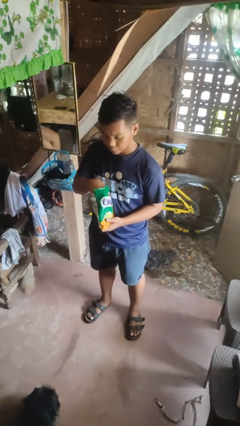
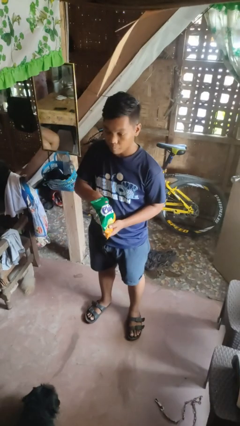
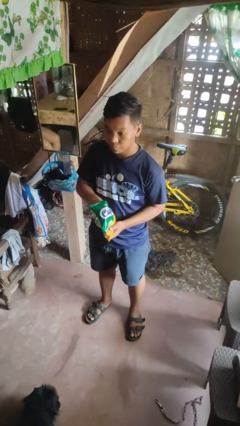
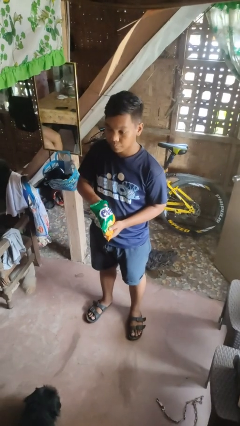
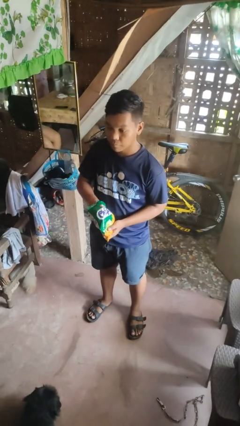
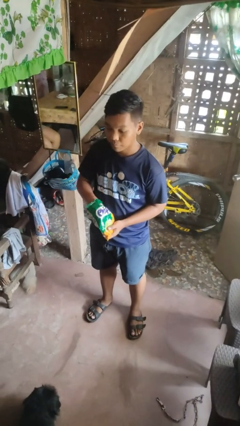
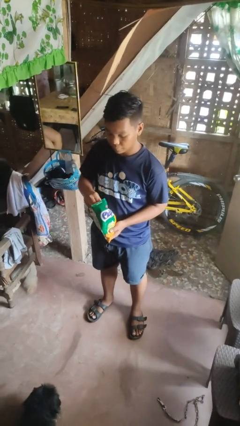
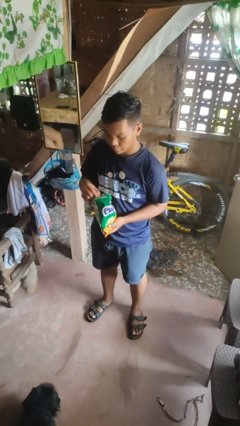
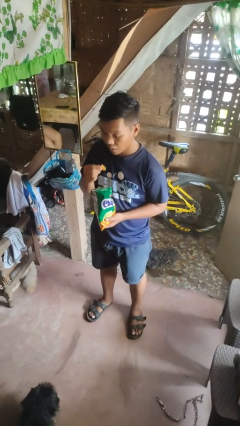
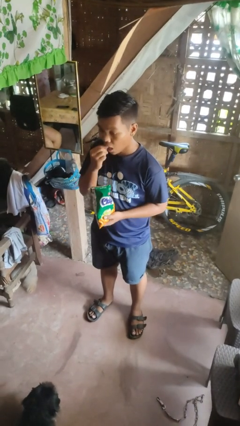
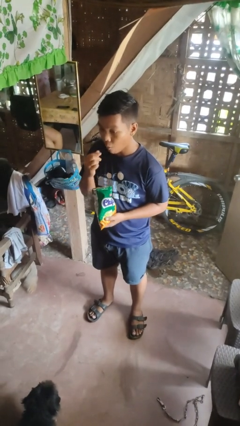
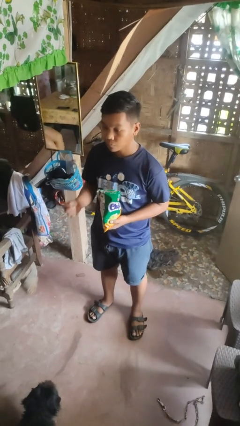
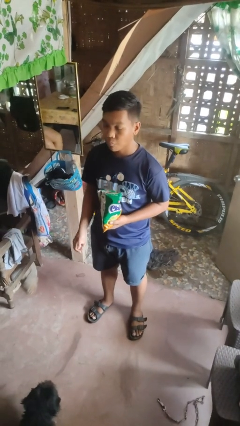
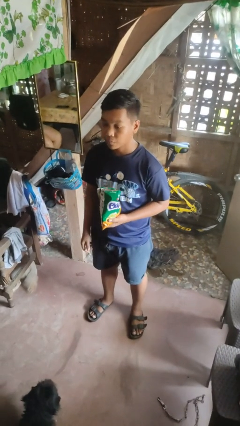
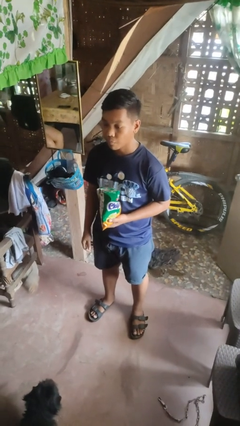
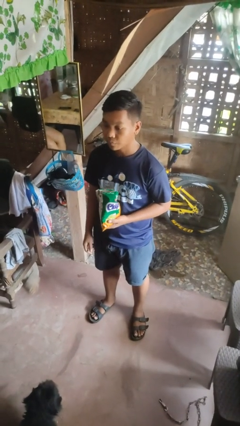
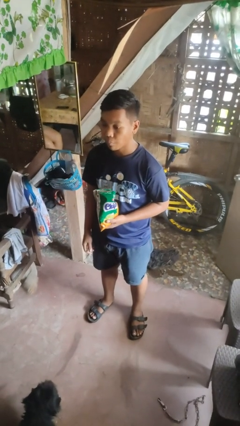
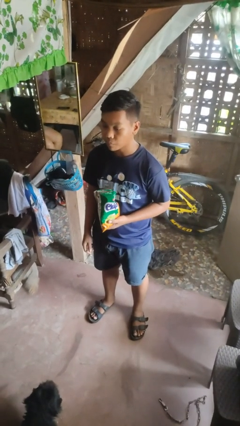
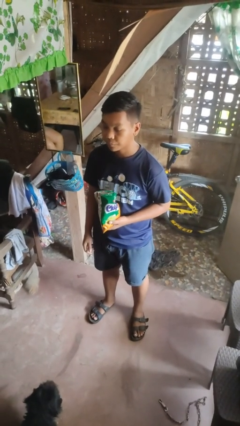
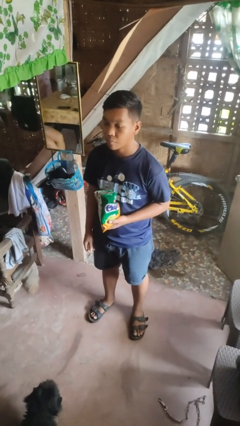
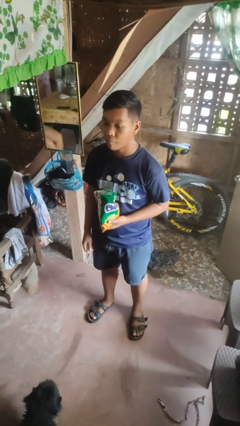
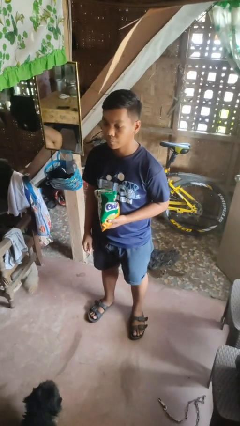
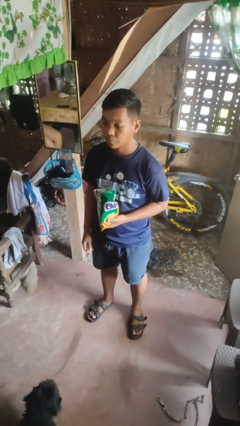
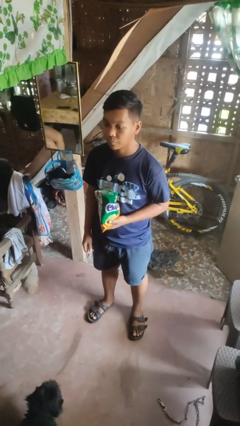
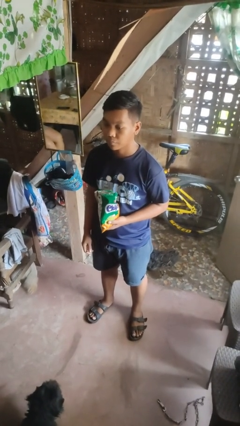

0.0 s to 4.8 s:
person eats snack from bag

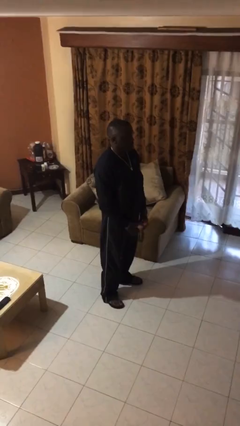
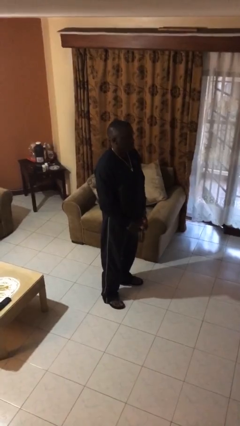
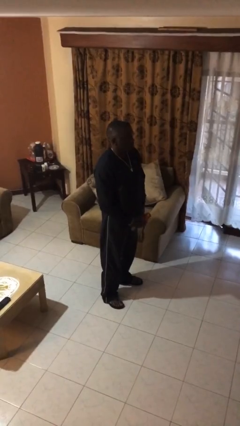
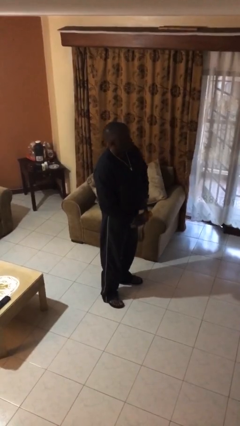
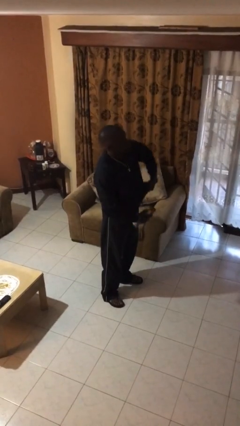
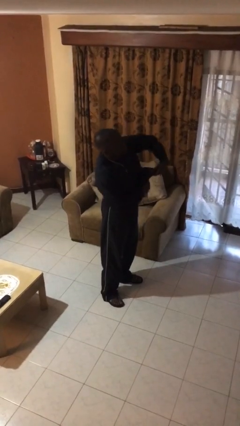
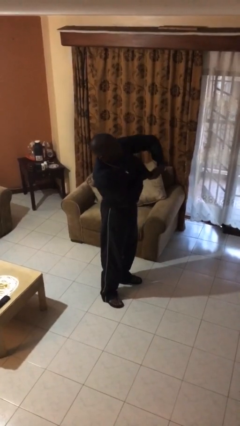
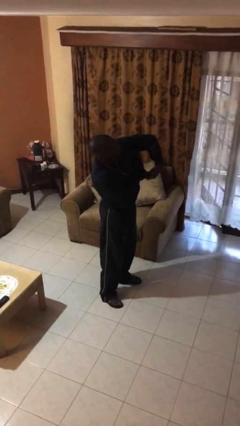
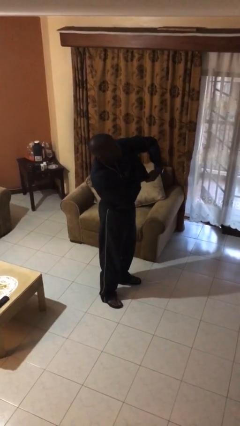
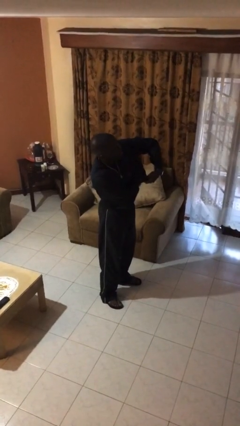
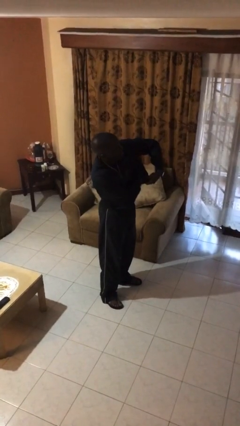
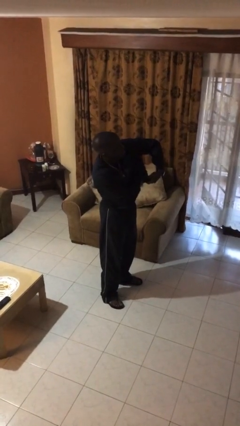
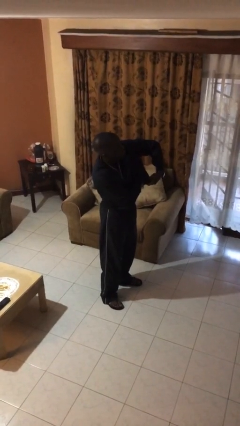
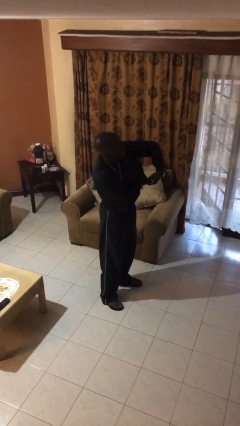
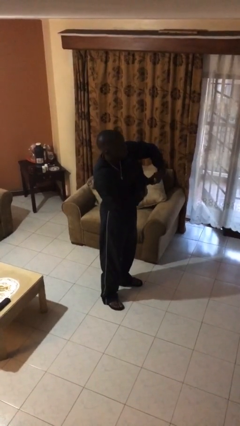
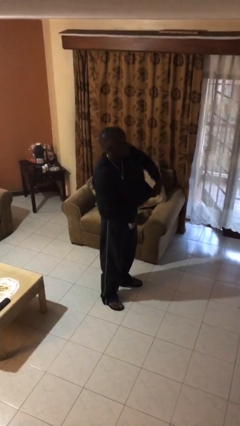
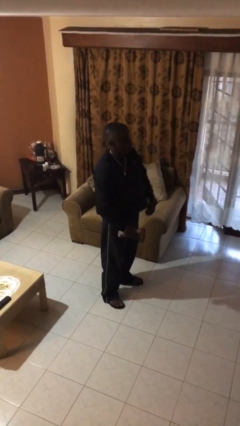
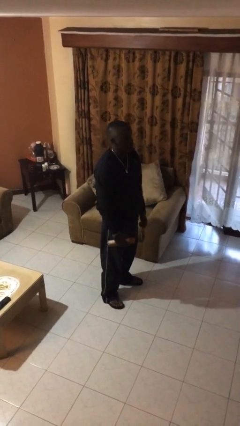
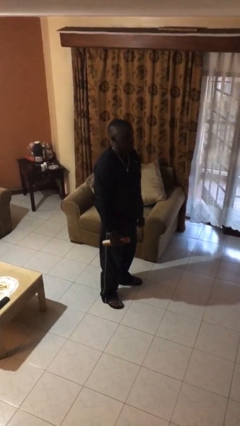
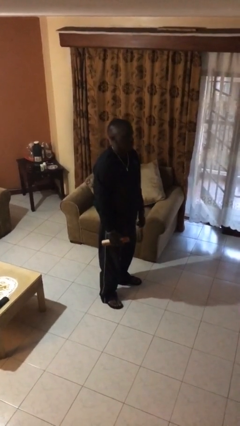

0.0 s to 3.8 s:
person applies deodorant

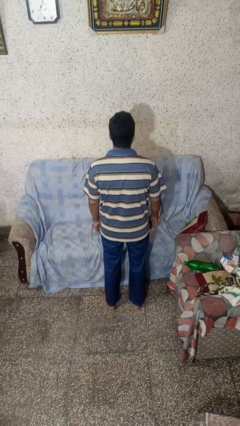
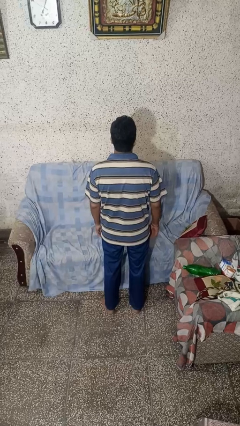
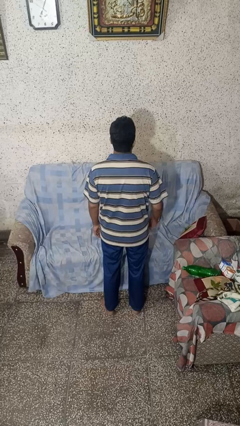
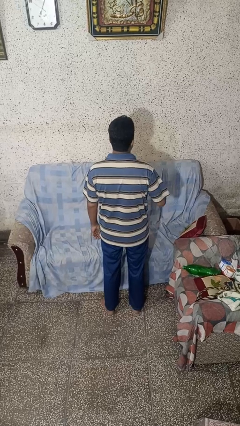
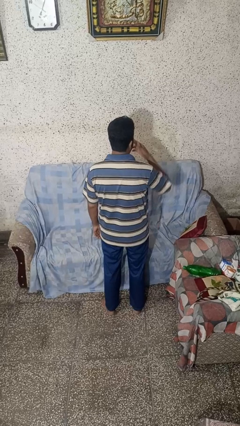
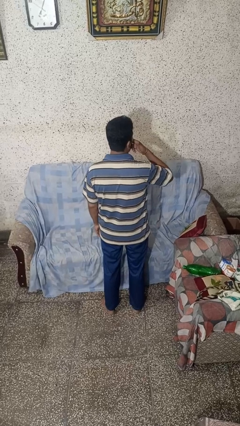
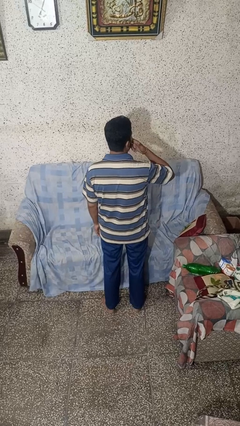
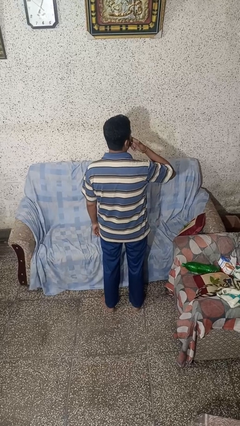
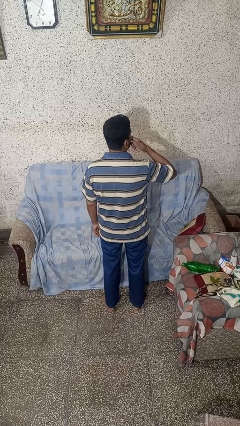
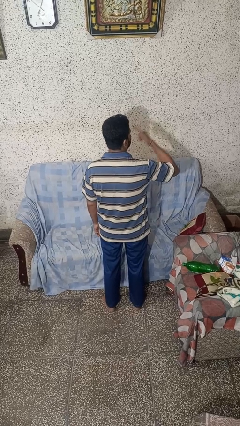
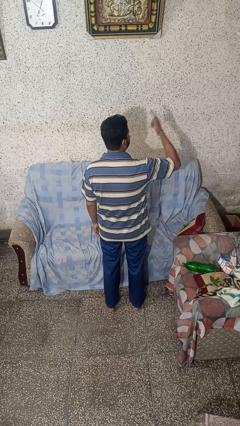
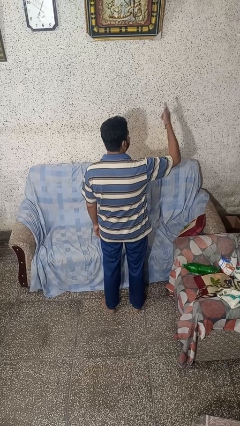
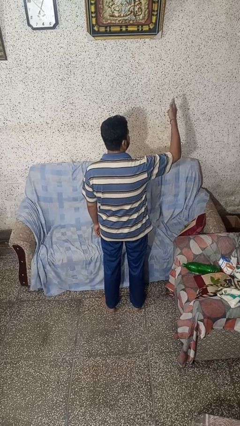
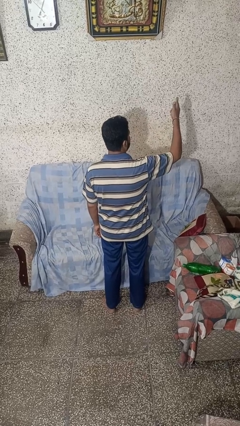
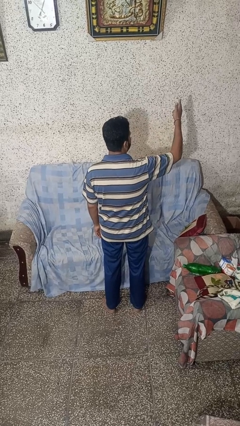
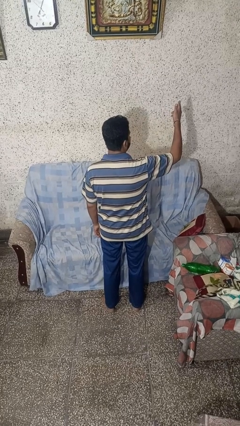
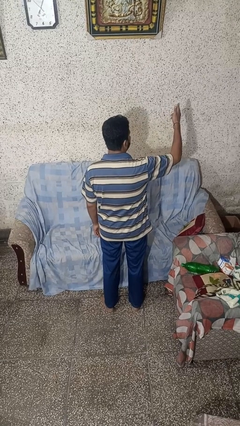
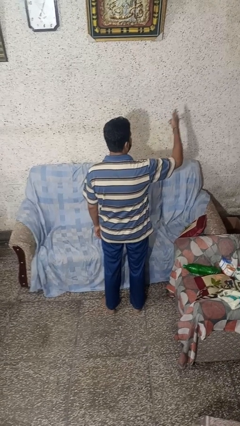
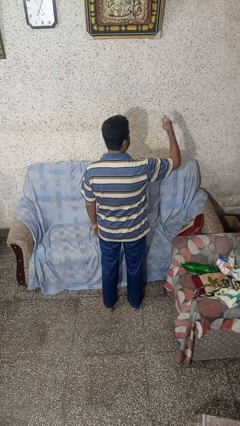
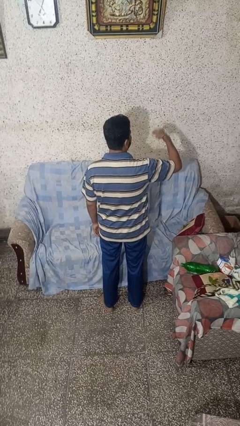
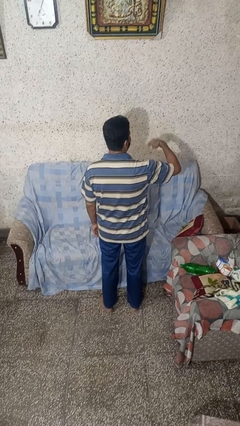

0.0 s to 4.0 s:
person gestures blow kiss

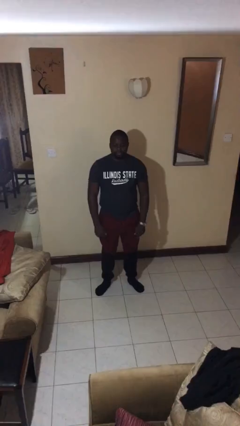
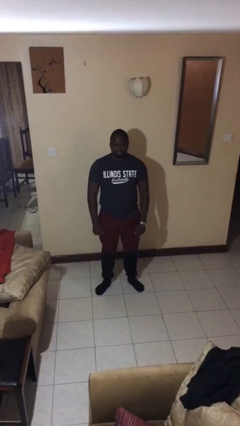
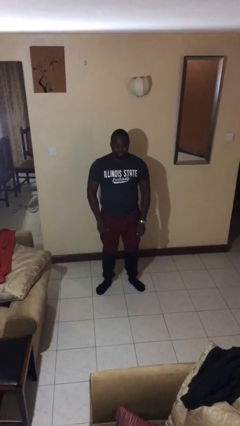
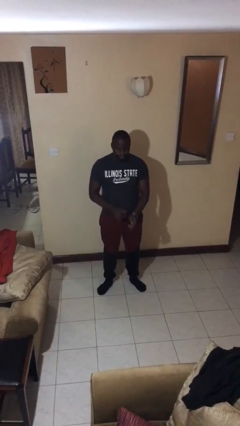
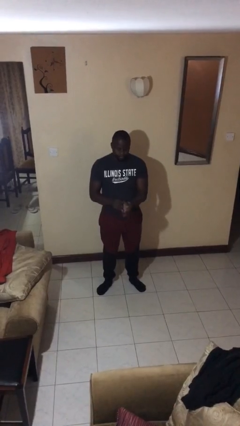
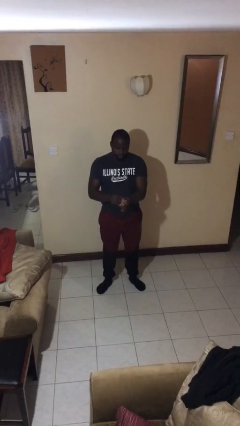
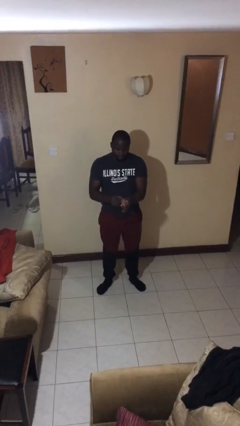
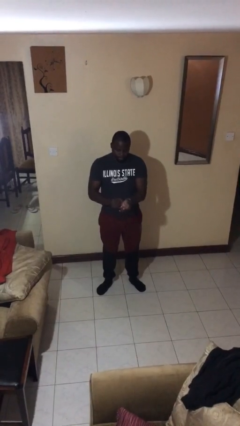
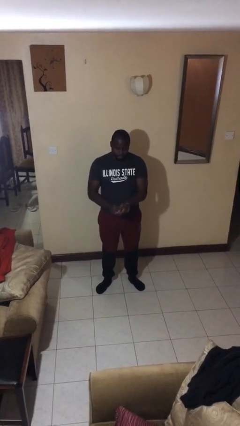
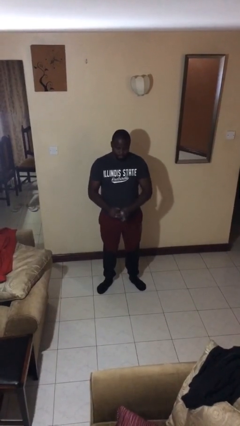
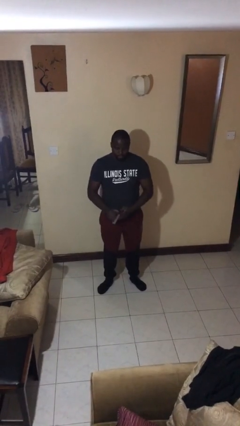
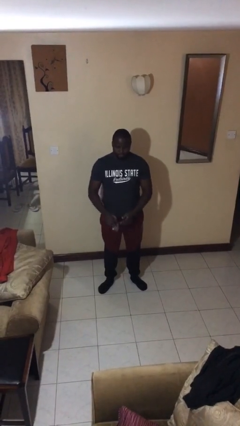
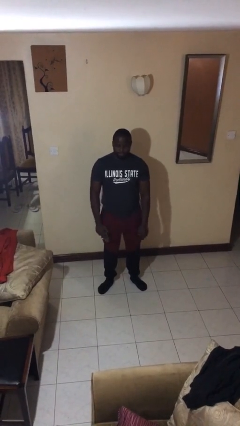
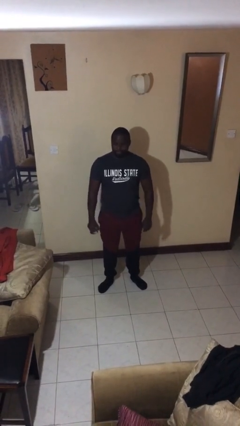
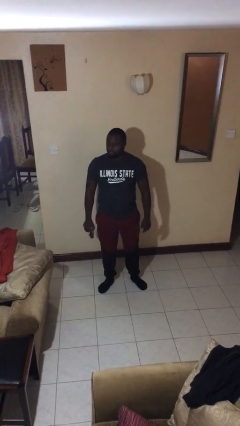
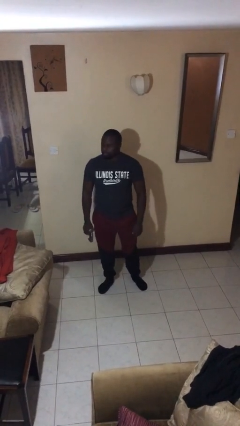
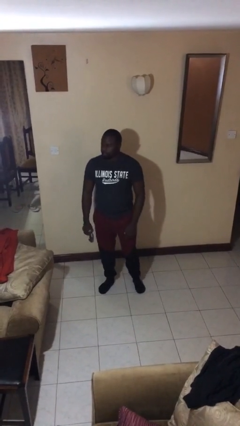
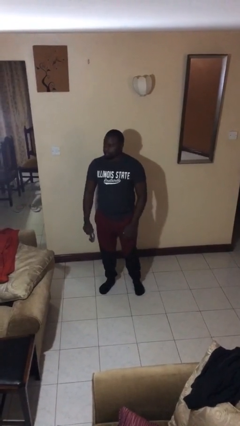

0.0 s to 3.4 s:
person takes off wristwatch

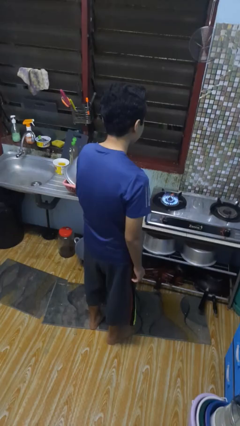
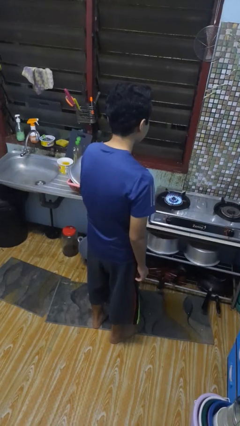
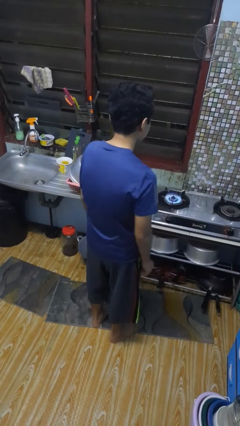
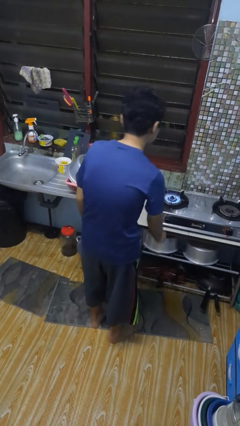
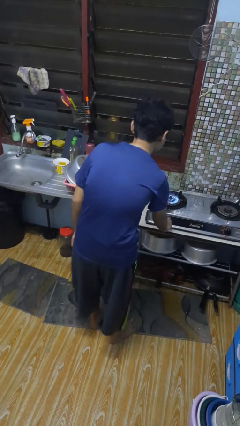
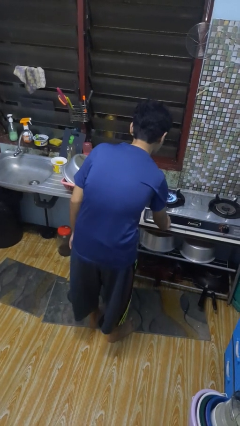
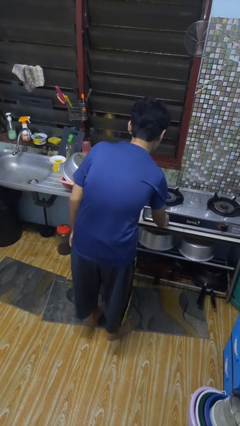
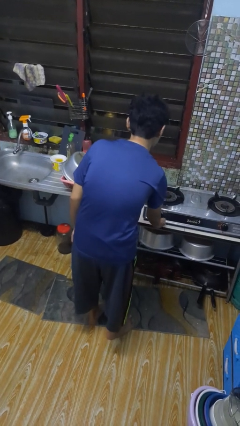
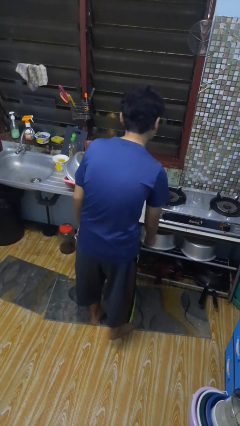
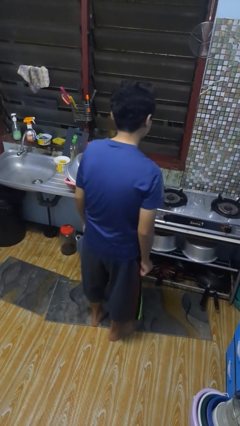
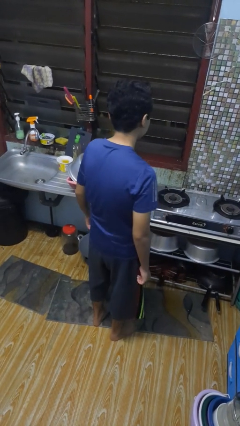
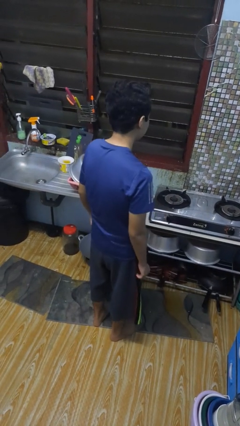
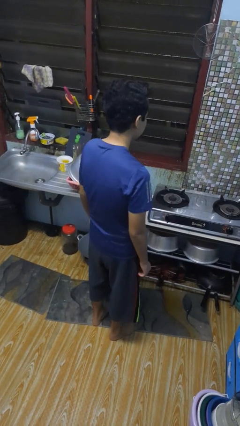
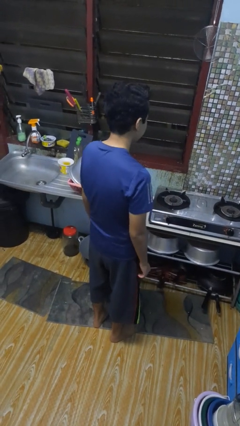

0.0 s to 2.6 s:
person turns off stovetop
